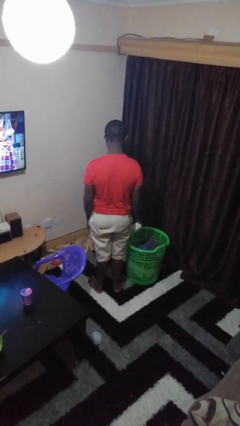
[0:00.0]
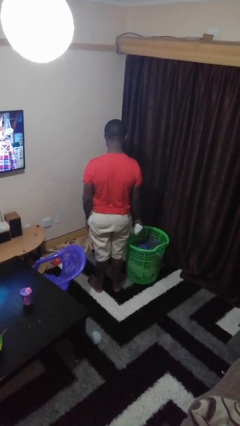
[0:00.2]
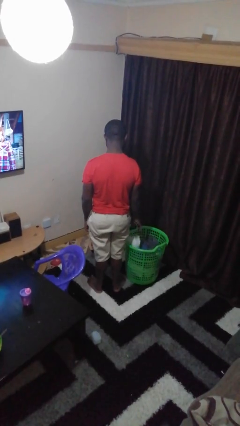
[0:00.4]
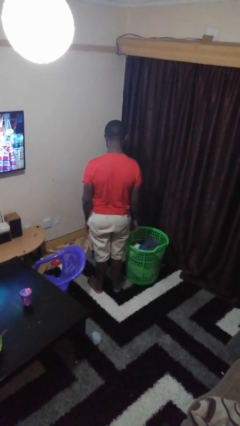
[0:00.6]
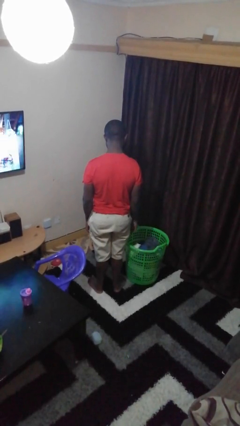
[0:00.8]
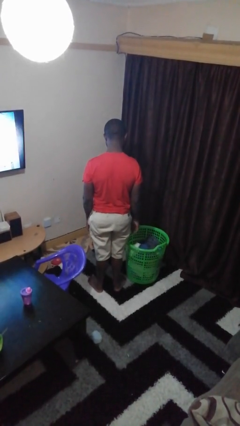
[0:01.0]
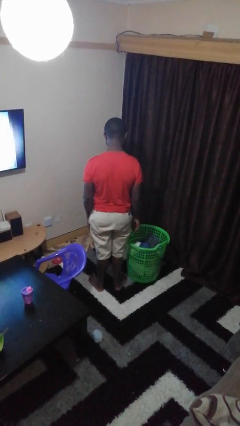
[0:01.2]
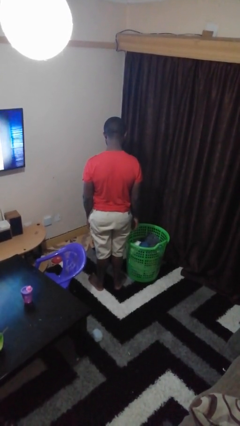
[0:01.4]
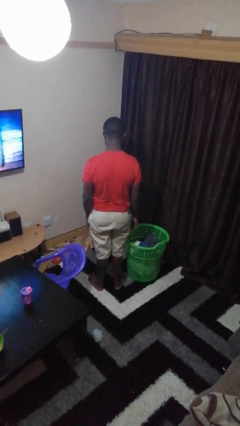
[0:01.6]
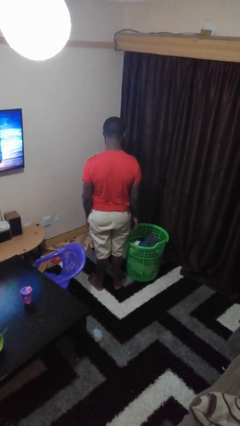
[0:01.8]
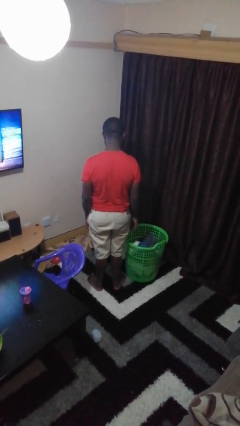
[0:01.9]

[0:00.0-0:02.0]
person puts object into basket

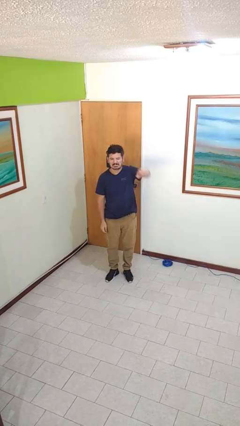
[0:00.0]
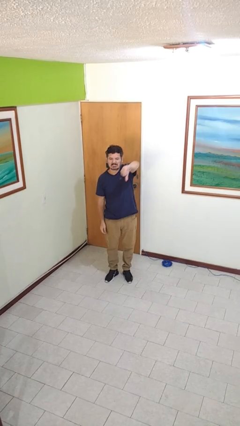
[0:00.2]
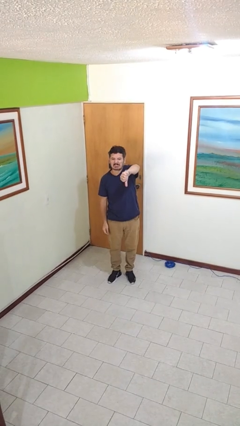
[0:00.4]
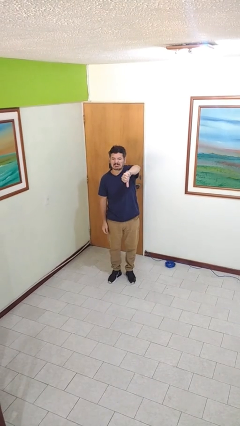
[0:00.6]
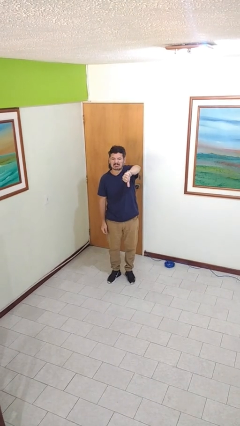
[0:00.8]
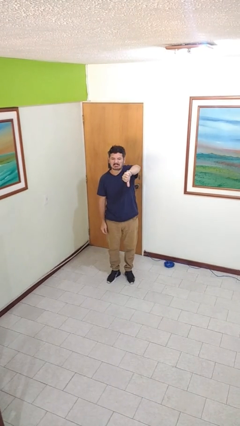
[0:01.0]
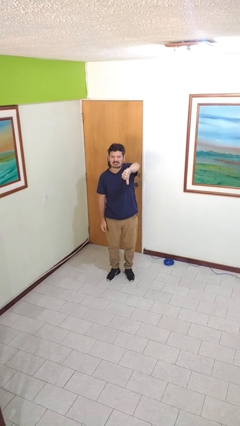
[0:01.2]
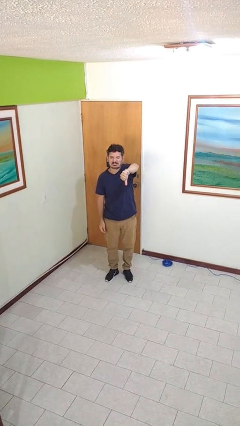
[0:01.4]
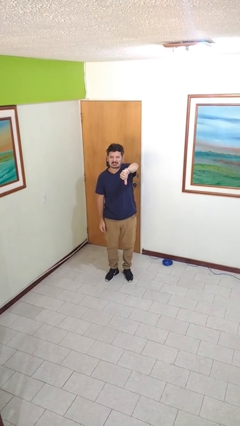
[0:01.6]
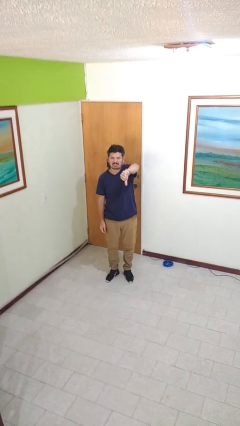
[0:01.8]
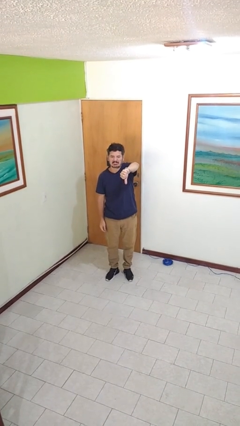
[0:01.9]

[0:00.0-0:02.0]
person gestures thumbs down

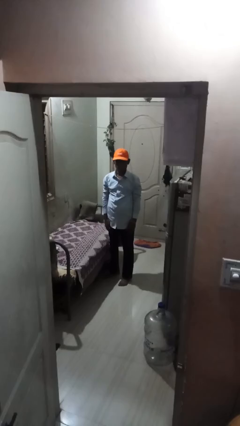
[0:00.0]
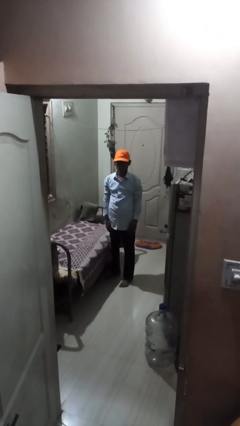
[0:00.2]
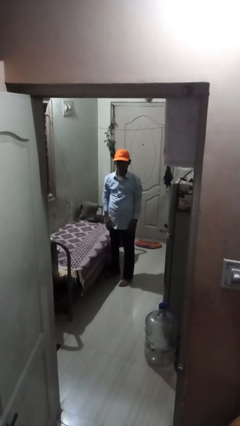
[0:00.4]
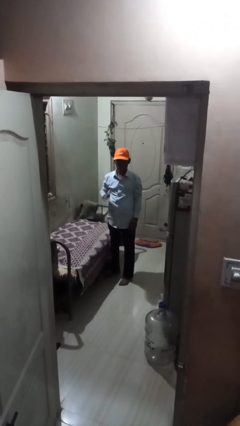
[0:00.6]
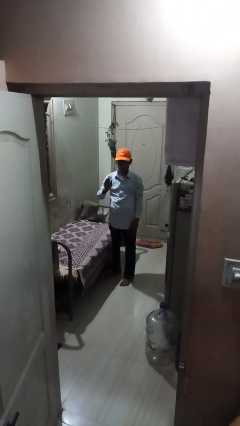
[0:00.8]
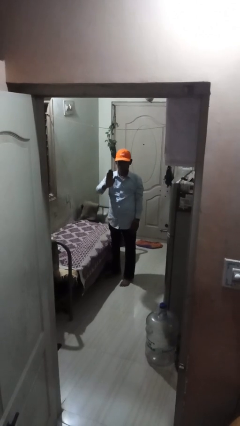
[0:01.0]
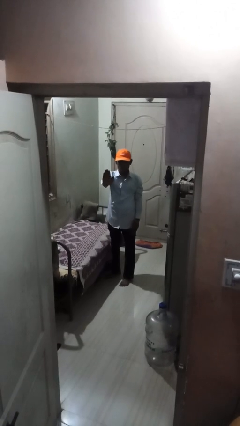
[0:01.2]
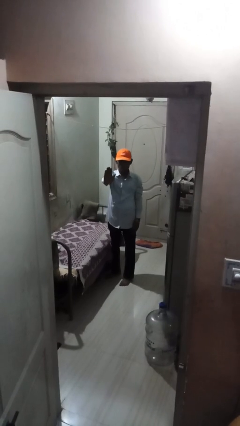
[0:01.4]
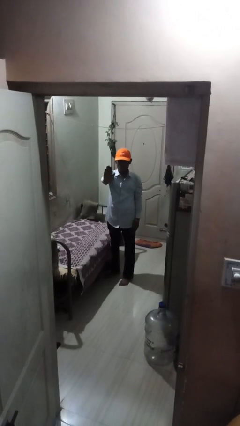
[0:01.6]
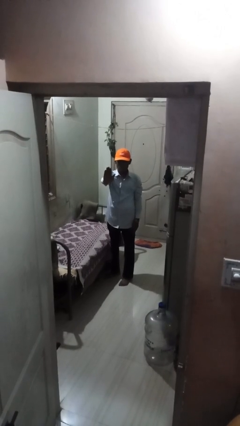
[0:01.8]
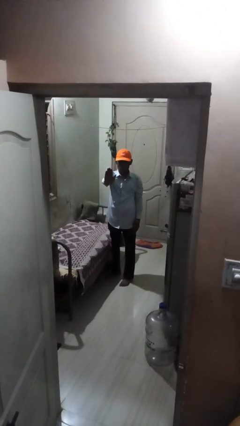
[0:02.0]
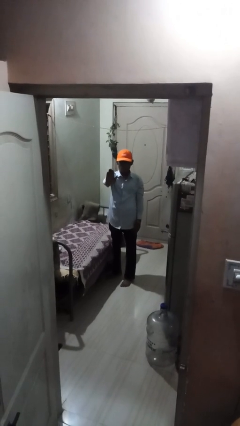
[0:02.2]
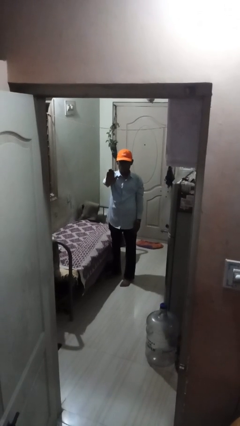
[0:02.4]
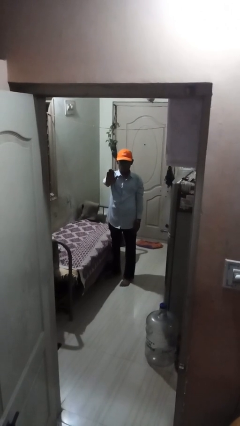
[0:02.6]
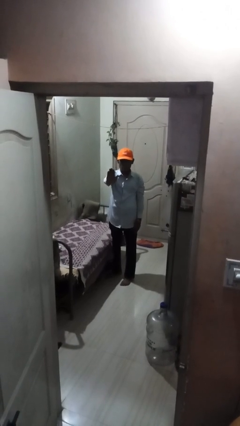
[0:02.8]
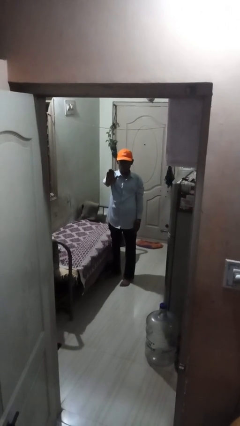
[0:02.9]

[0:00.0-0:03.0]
person gestures stop

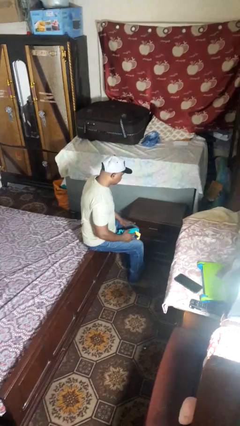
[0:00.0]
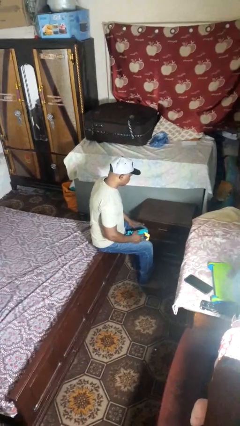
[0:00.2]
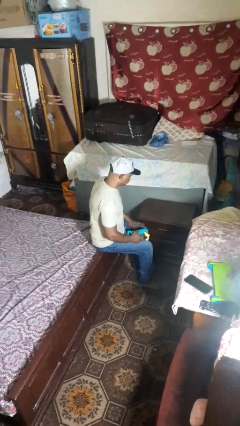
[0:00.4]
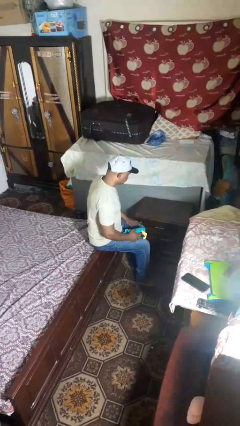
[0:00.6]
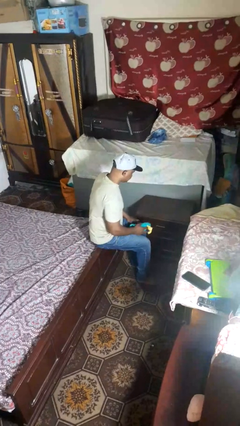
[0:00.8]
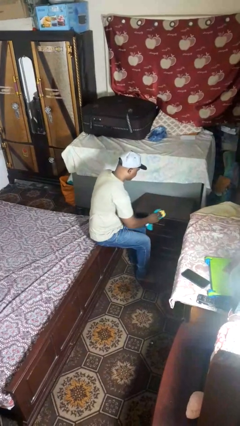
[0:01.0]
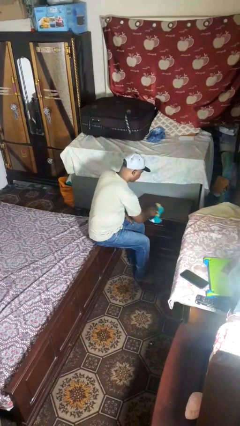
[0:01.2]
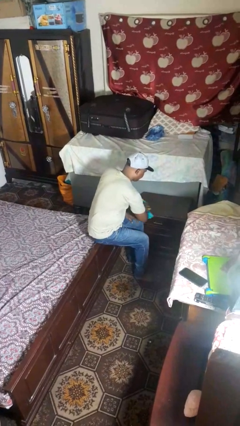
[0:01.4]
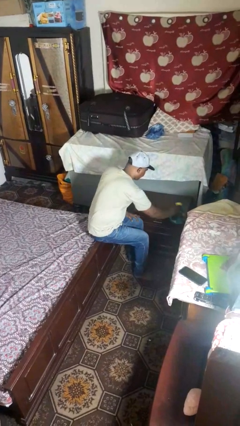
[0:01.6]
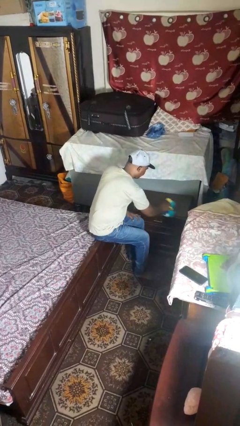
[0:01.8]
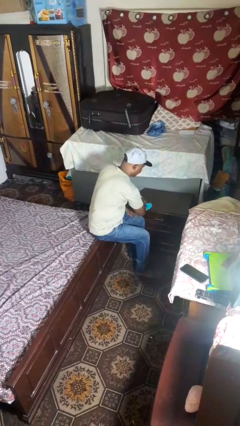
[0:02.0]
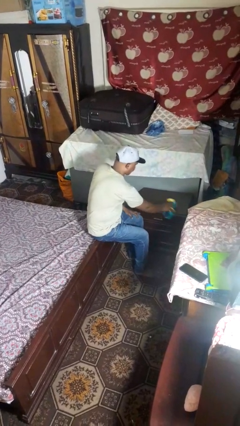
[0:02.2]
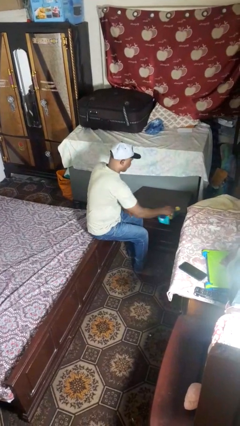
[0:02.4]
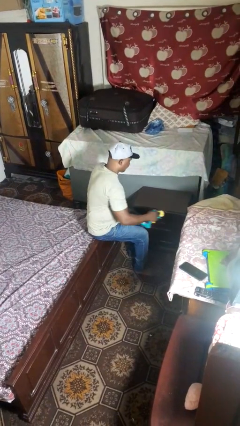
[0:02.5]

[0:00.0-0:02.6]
person cleans table with rag

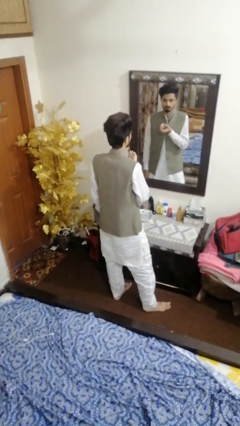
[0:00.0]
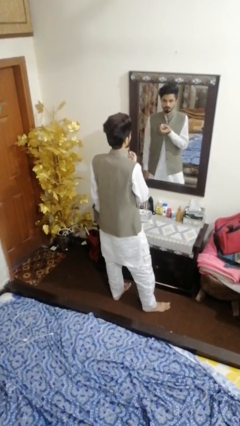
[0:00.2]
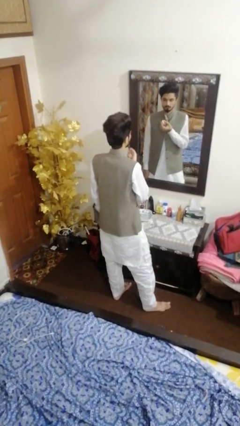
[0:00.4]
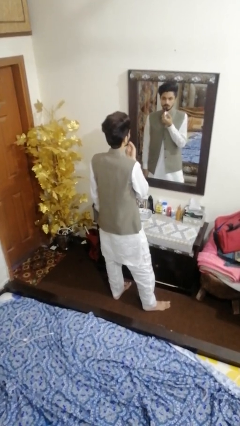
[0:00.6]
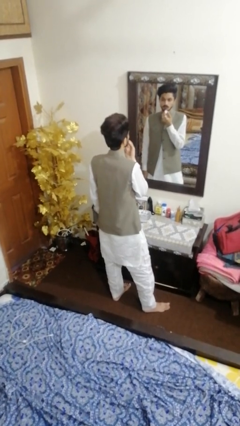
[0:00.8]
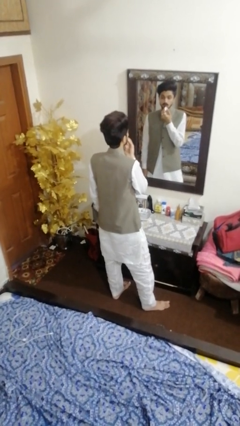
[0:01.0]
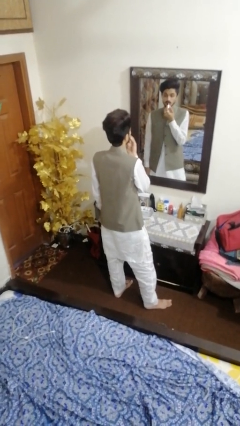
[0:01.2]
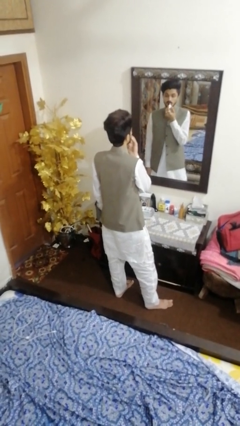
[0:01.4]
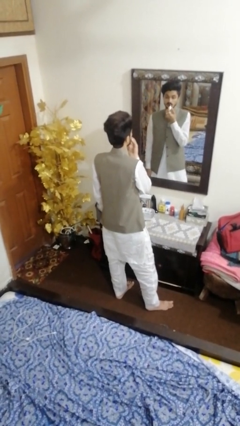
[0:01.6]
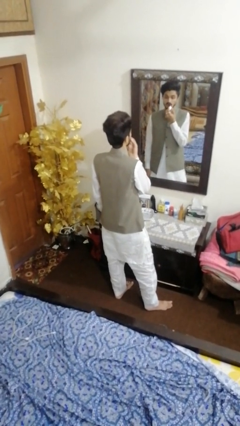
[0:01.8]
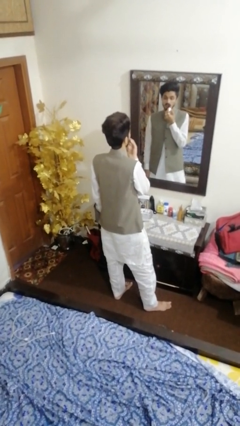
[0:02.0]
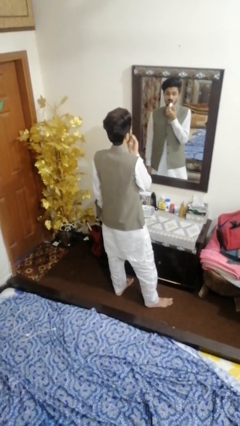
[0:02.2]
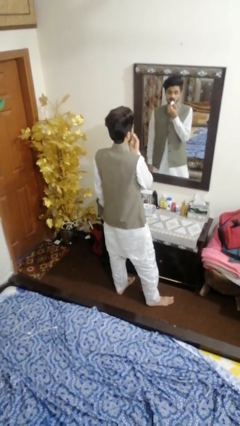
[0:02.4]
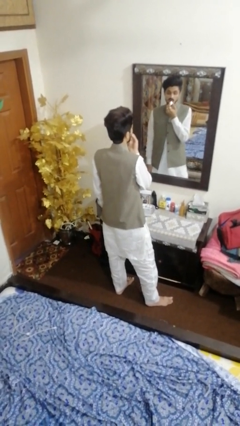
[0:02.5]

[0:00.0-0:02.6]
person applies lip makeup

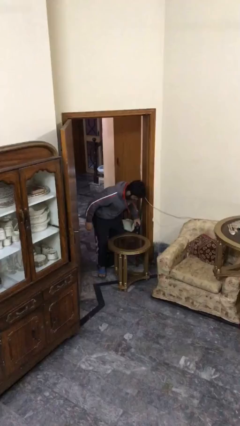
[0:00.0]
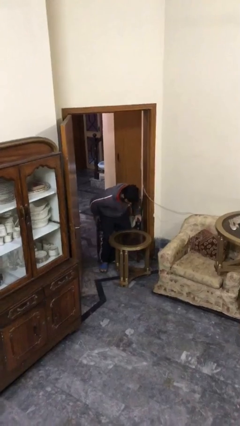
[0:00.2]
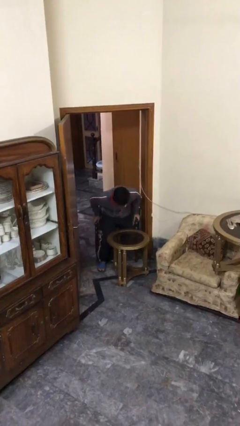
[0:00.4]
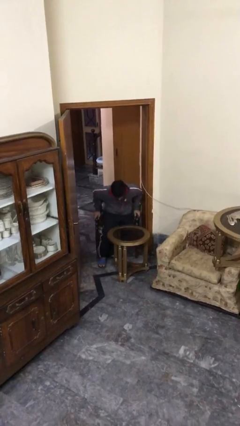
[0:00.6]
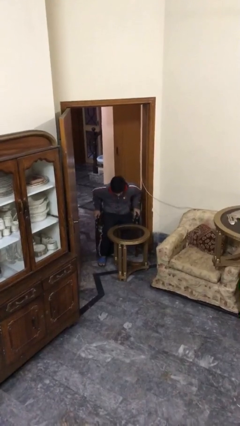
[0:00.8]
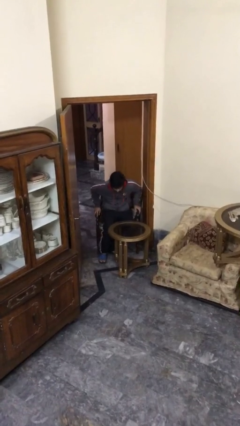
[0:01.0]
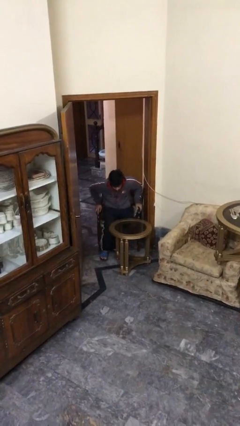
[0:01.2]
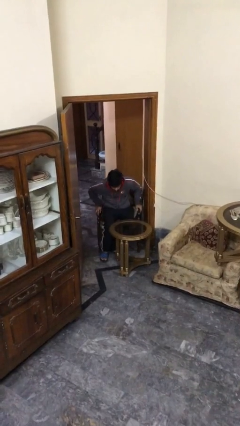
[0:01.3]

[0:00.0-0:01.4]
person sits down

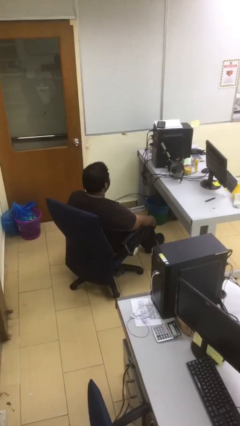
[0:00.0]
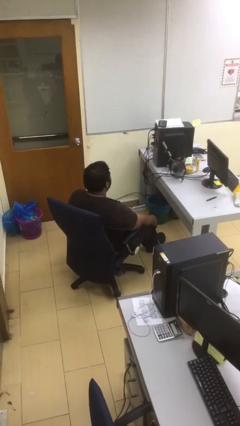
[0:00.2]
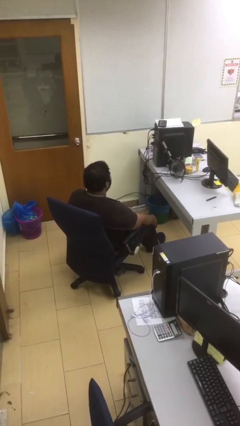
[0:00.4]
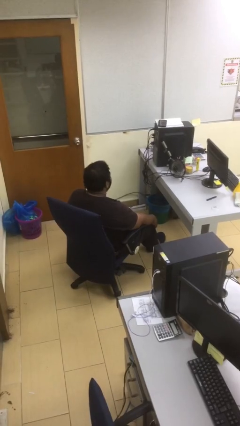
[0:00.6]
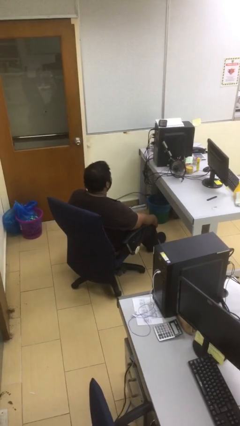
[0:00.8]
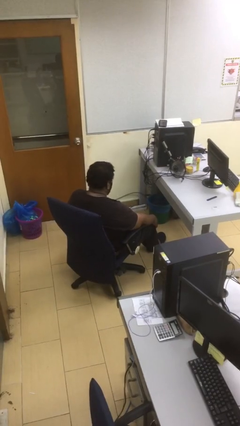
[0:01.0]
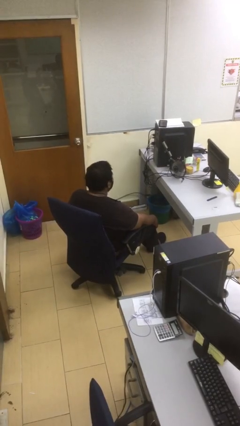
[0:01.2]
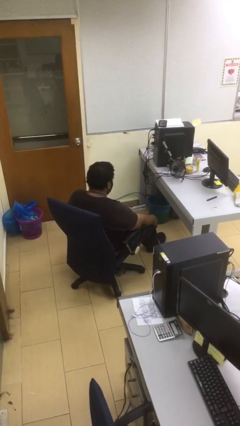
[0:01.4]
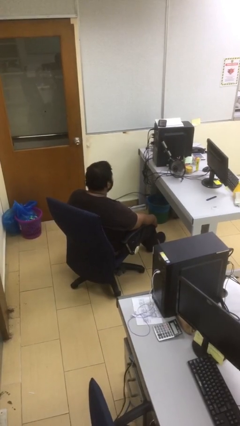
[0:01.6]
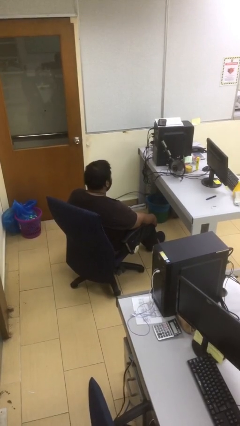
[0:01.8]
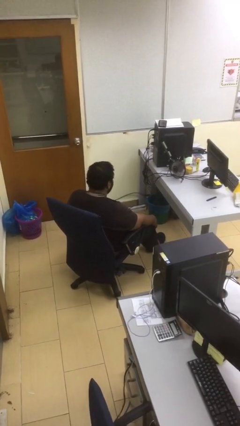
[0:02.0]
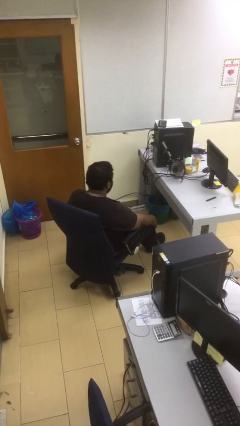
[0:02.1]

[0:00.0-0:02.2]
person nods head

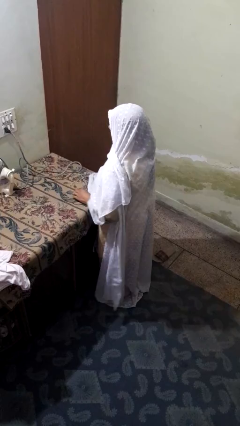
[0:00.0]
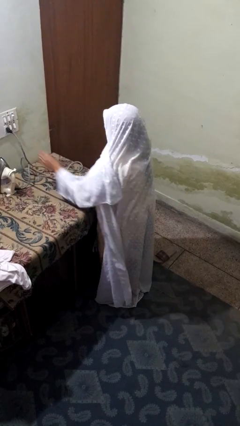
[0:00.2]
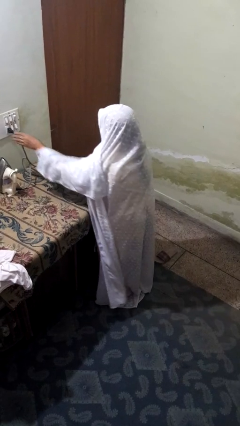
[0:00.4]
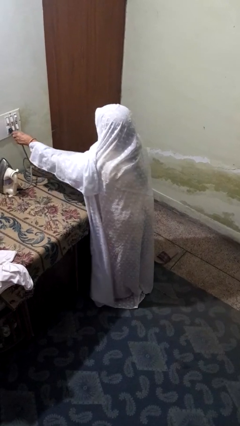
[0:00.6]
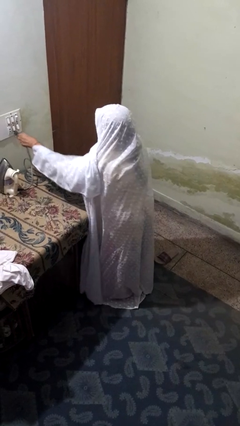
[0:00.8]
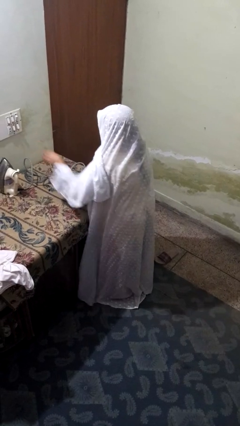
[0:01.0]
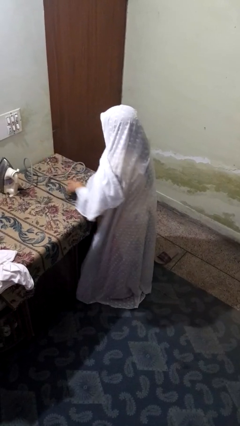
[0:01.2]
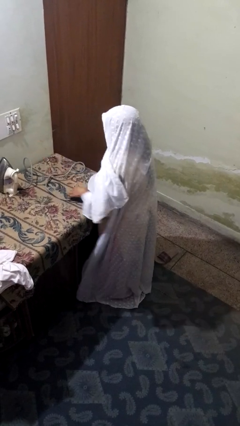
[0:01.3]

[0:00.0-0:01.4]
person unplugs from electrical socket
